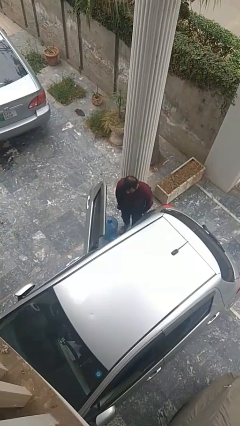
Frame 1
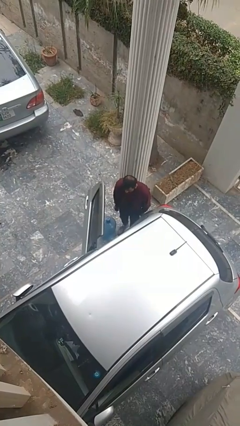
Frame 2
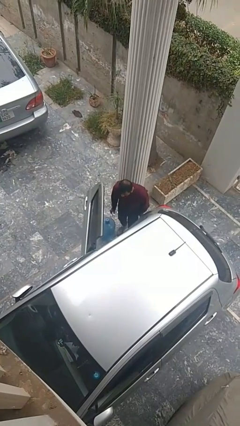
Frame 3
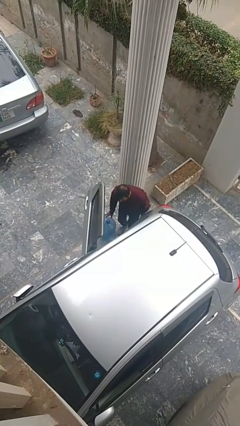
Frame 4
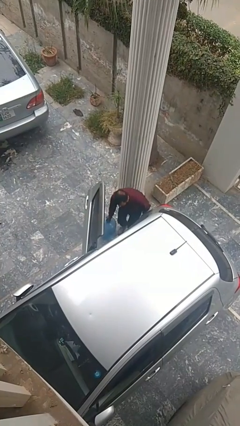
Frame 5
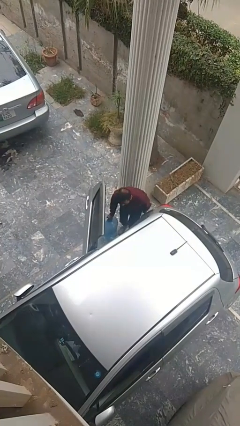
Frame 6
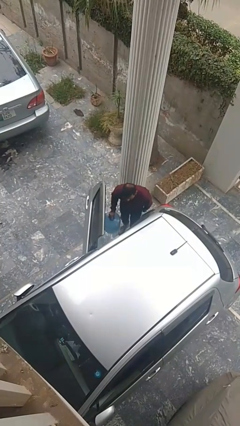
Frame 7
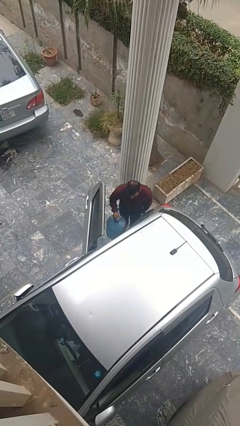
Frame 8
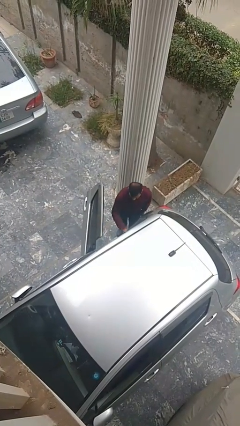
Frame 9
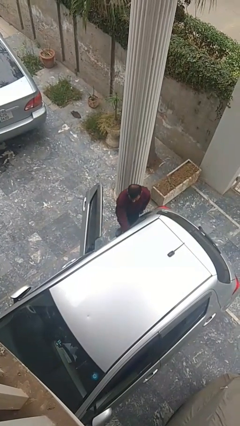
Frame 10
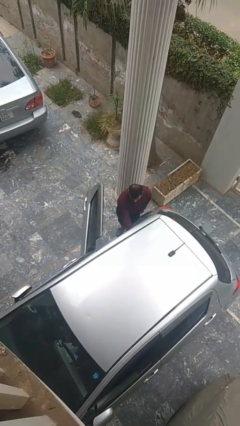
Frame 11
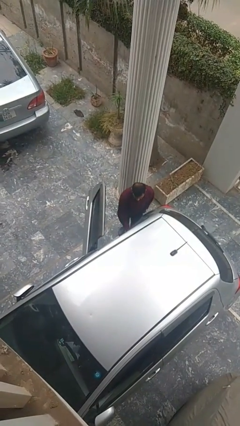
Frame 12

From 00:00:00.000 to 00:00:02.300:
person loads car

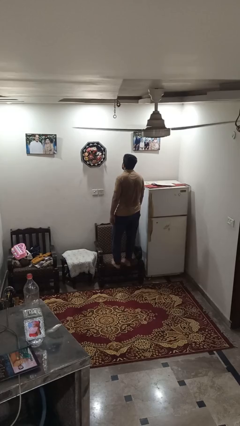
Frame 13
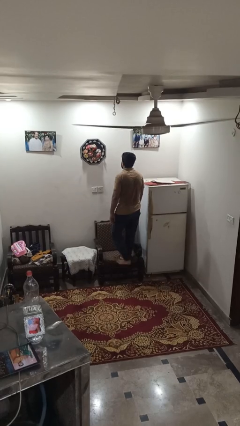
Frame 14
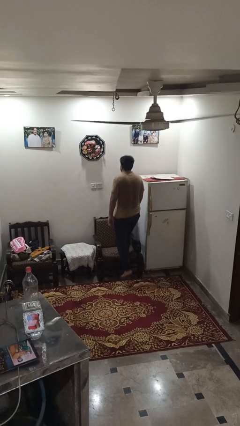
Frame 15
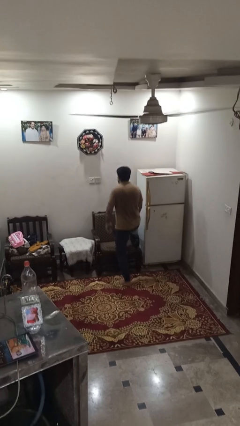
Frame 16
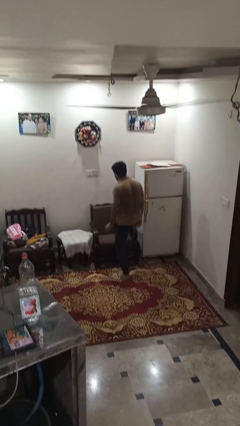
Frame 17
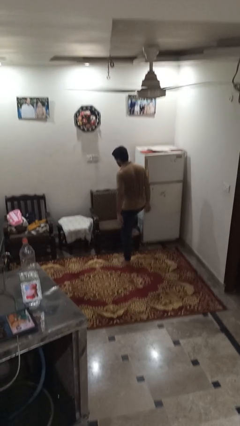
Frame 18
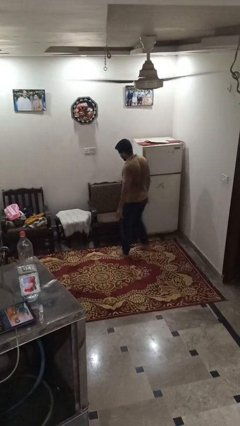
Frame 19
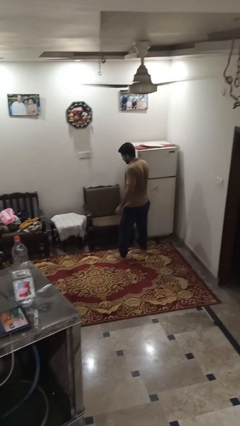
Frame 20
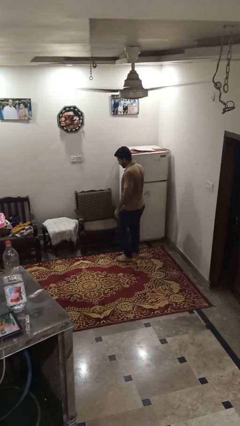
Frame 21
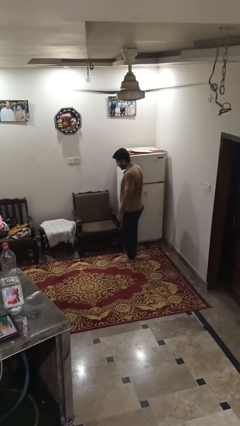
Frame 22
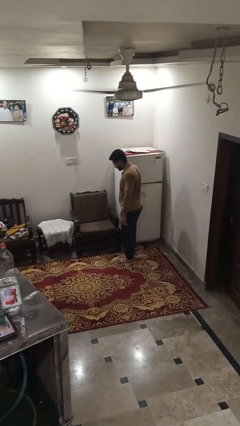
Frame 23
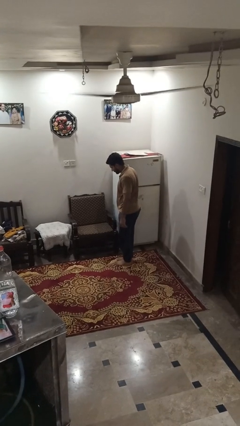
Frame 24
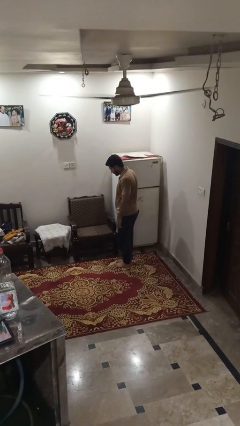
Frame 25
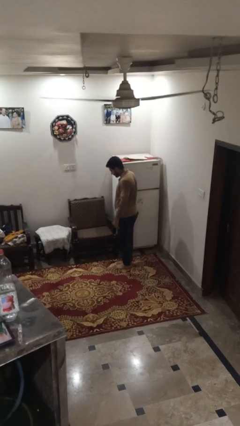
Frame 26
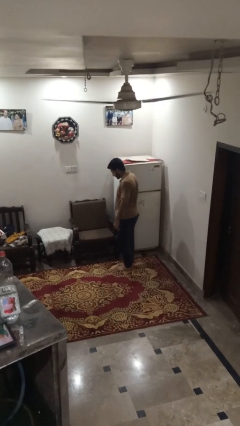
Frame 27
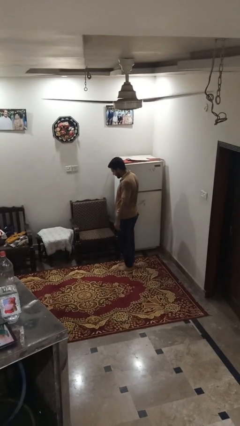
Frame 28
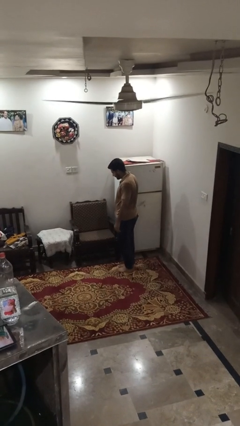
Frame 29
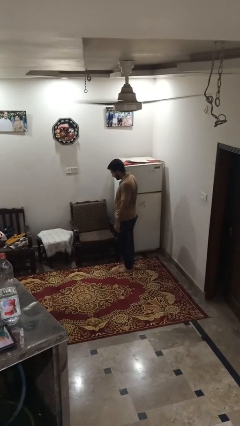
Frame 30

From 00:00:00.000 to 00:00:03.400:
person climbs off couch

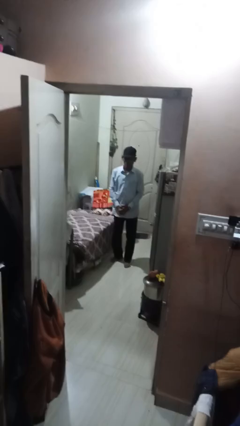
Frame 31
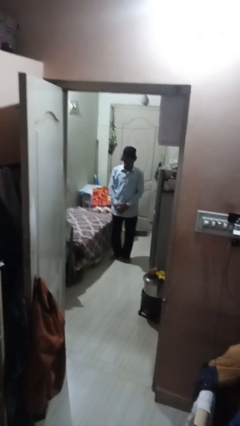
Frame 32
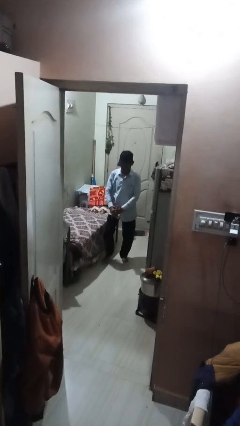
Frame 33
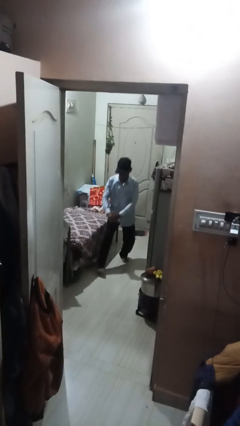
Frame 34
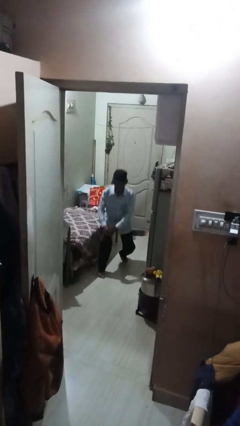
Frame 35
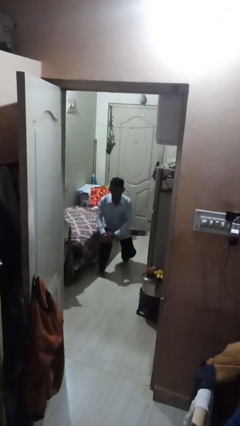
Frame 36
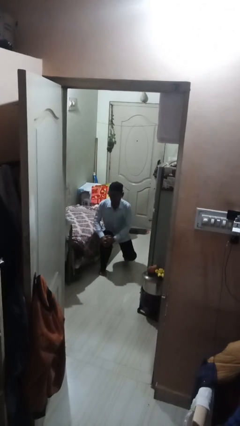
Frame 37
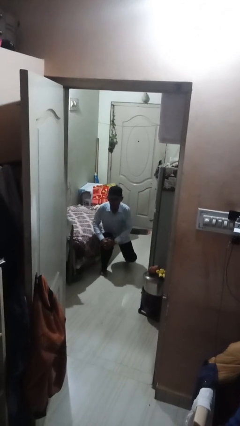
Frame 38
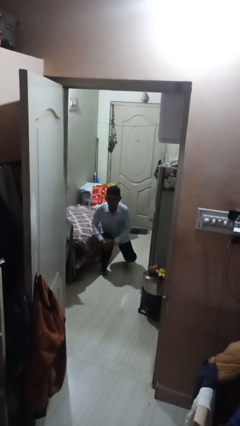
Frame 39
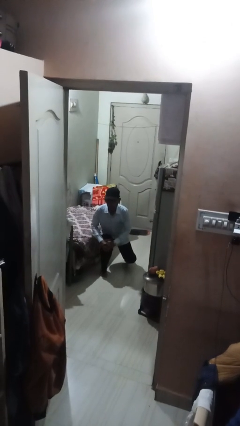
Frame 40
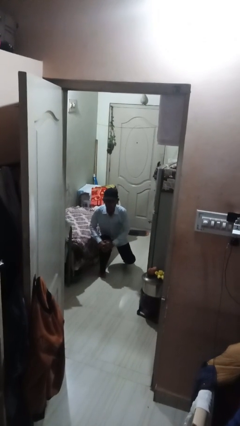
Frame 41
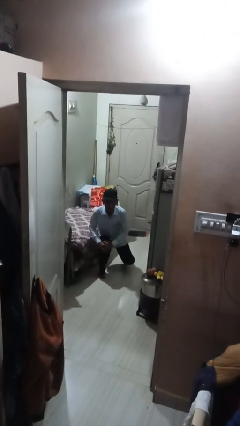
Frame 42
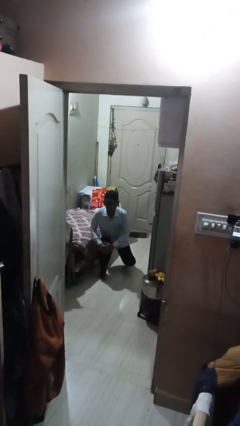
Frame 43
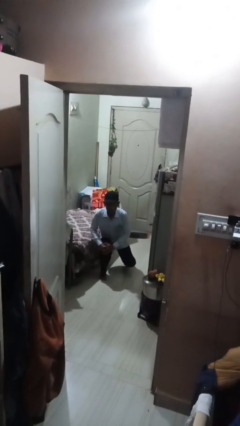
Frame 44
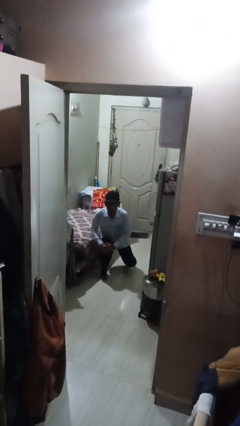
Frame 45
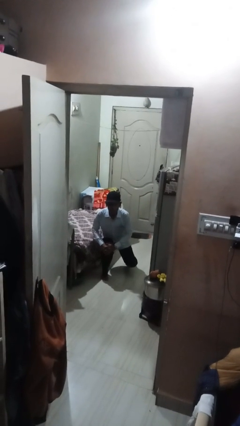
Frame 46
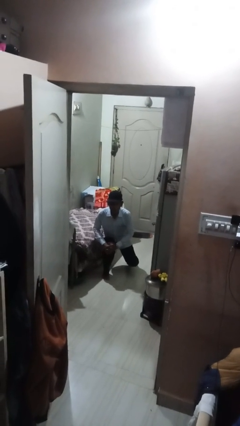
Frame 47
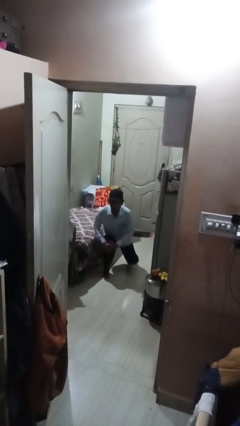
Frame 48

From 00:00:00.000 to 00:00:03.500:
person exercises with lunges

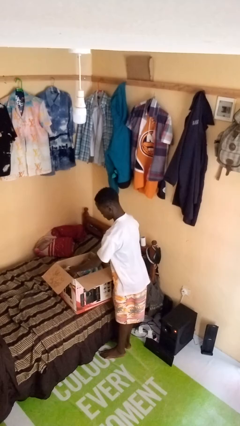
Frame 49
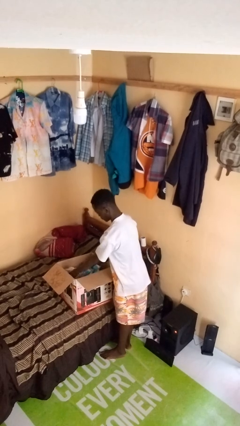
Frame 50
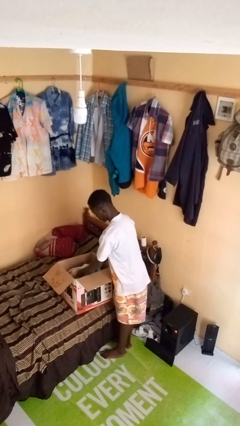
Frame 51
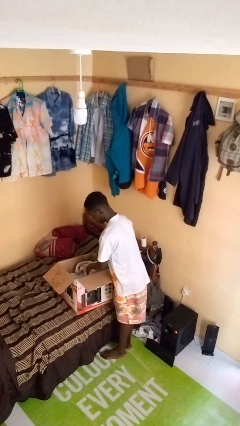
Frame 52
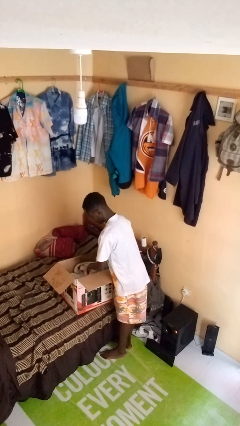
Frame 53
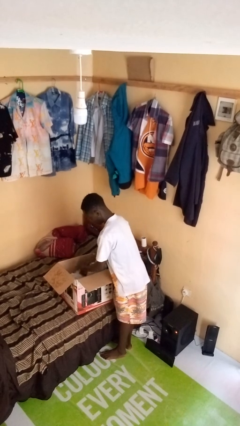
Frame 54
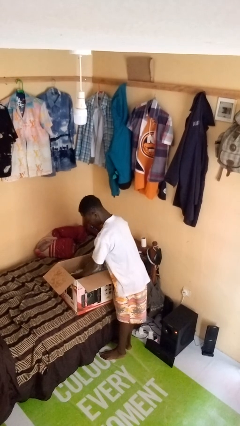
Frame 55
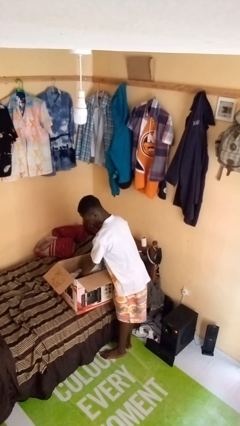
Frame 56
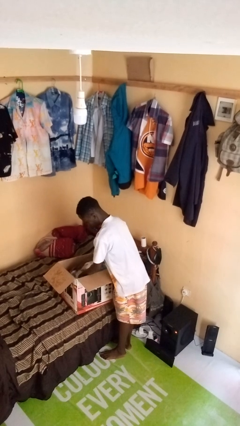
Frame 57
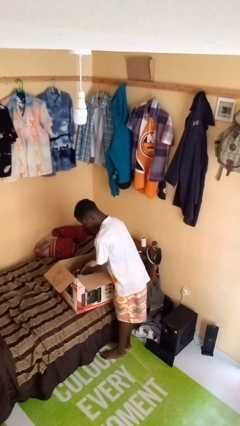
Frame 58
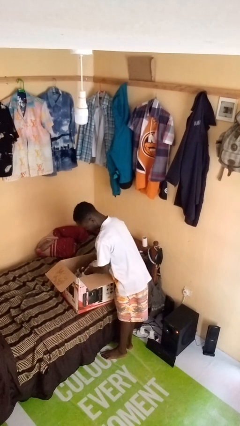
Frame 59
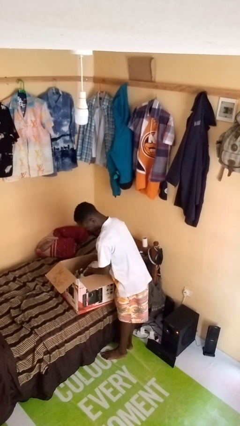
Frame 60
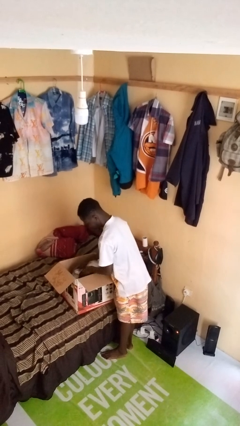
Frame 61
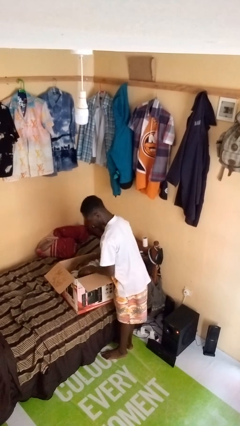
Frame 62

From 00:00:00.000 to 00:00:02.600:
person searches in box

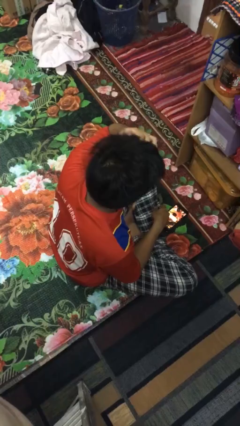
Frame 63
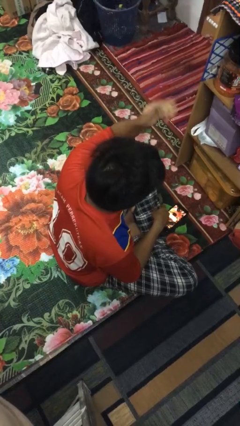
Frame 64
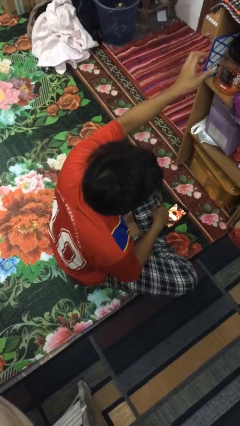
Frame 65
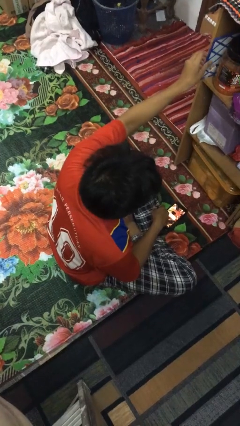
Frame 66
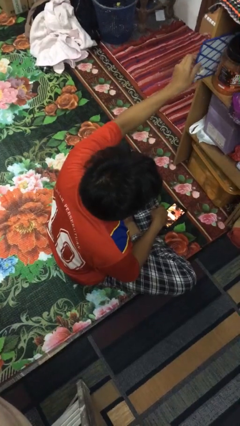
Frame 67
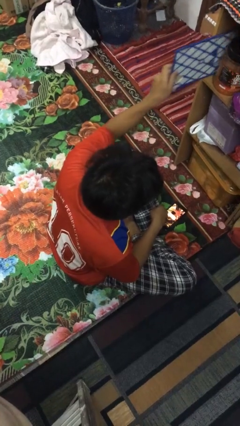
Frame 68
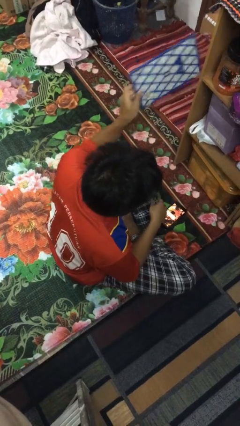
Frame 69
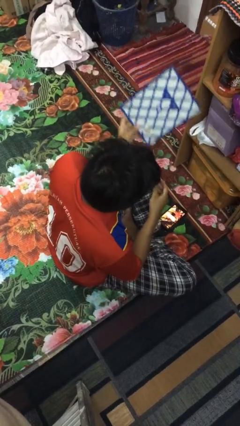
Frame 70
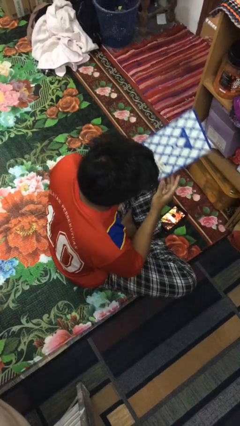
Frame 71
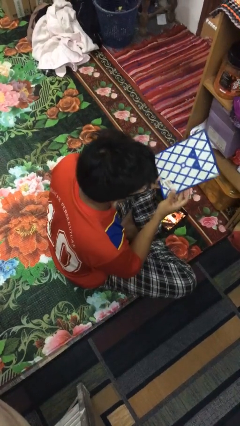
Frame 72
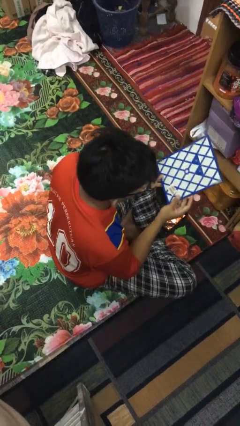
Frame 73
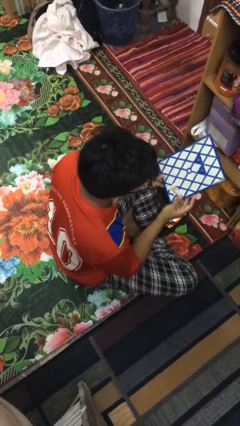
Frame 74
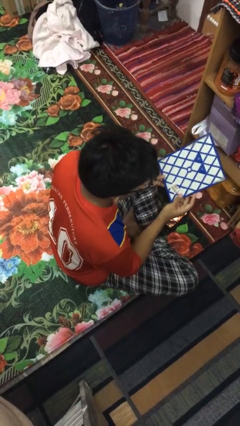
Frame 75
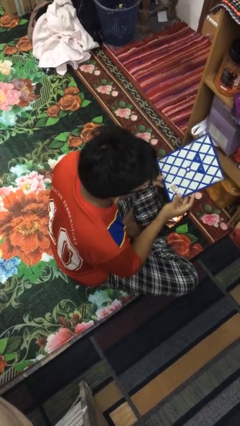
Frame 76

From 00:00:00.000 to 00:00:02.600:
person picks up object from cabinet

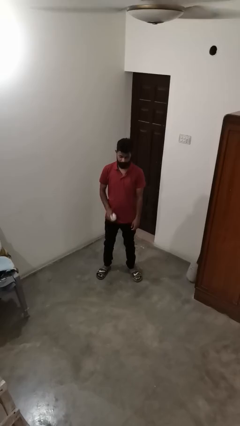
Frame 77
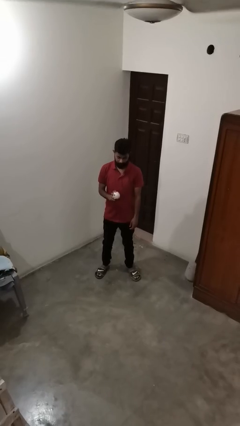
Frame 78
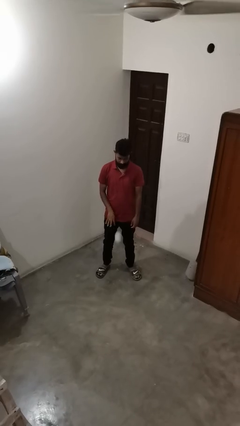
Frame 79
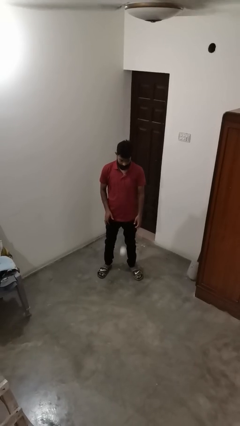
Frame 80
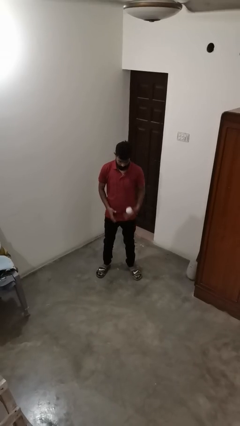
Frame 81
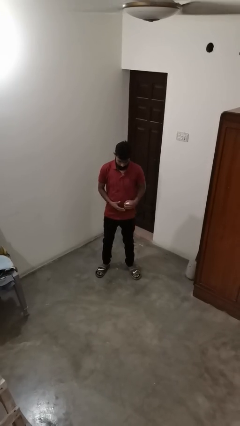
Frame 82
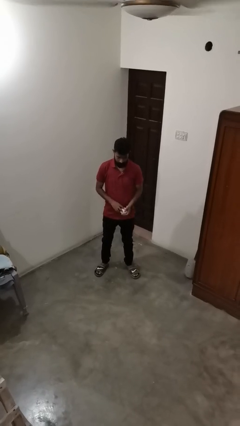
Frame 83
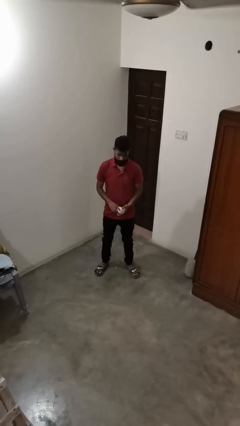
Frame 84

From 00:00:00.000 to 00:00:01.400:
person bounces ball on floor

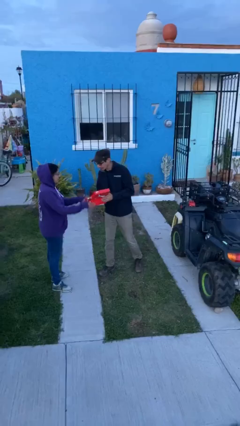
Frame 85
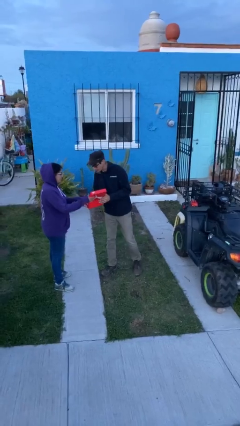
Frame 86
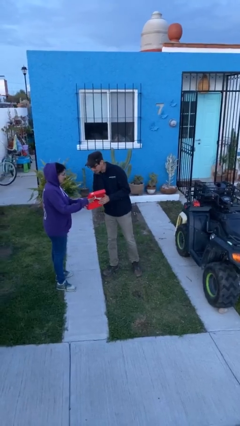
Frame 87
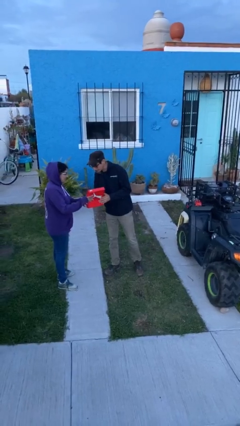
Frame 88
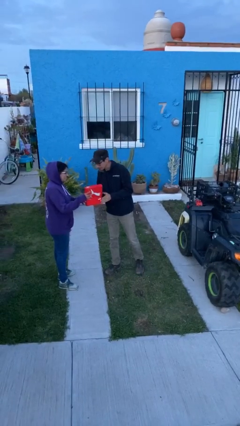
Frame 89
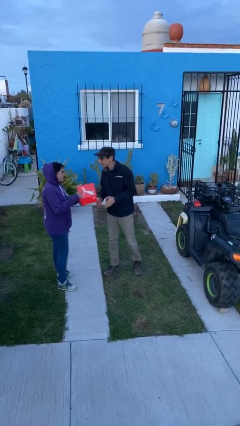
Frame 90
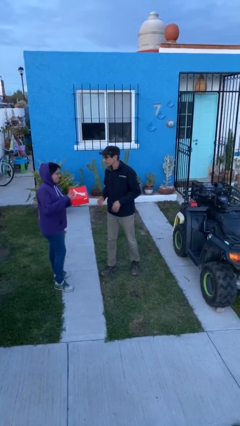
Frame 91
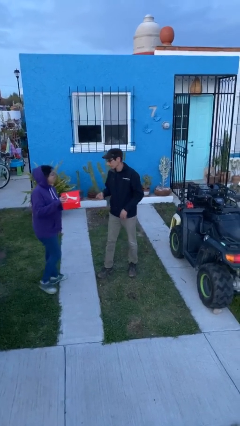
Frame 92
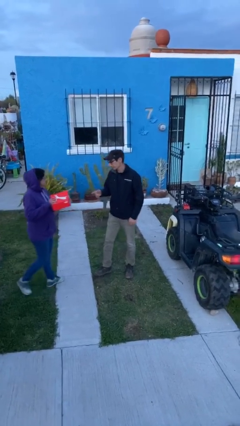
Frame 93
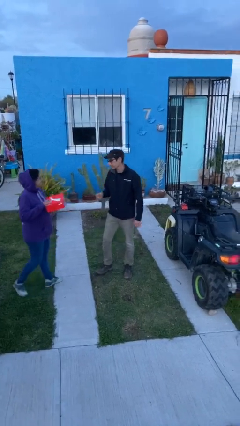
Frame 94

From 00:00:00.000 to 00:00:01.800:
person transfers object to person
